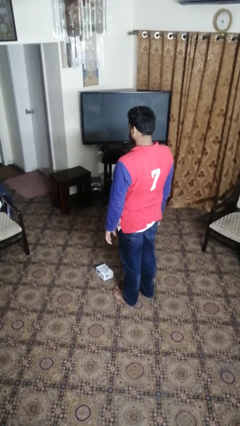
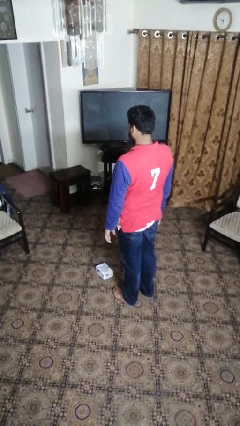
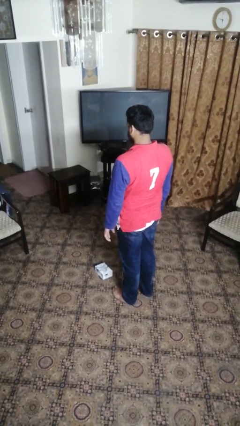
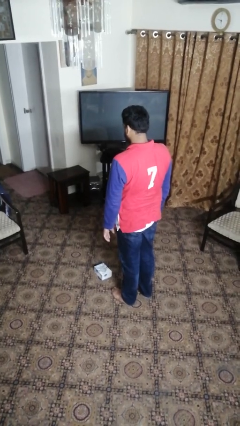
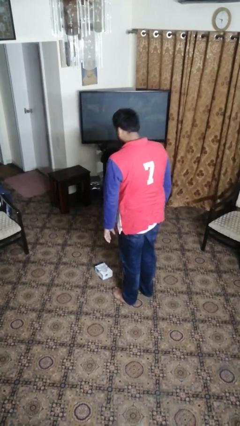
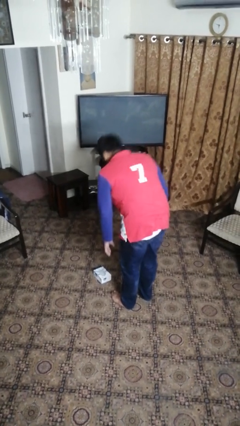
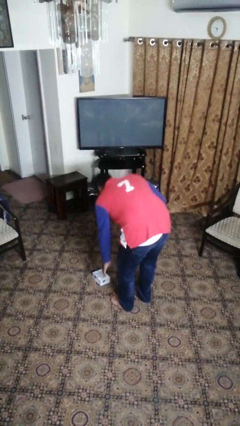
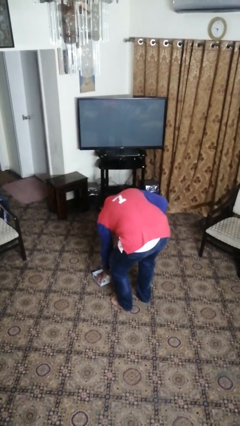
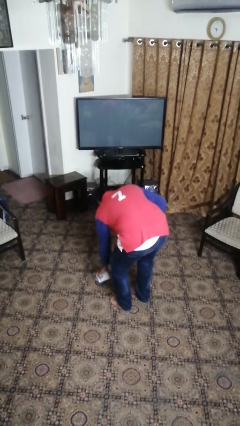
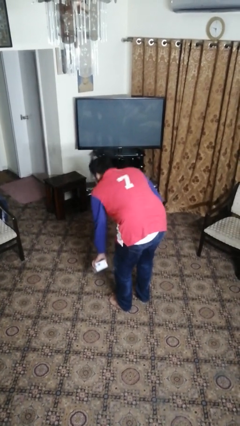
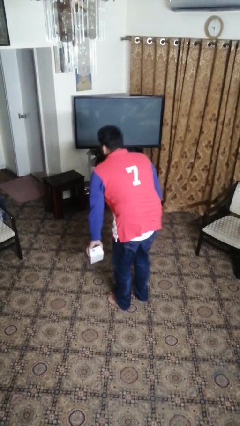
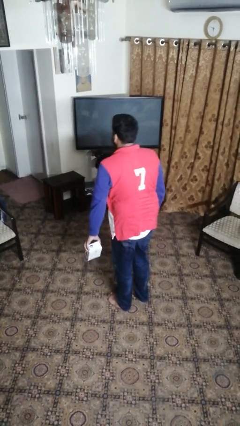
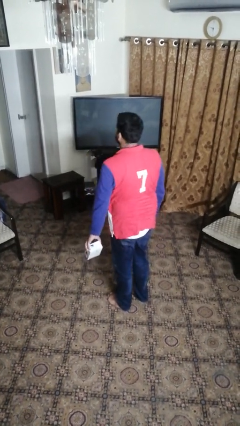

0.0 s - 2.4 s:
person picks up object from floor

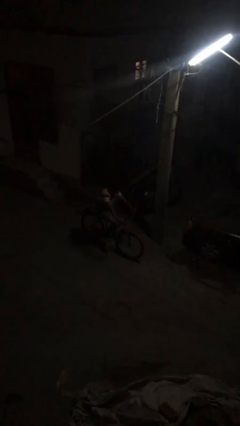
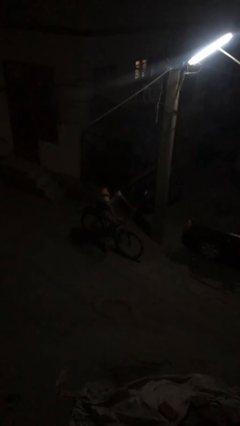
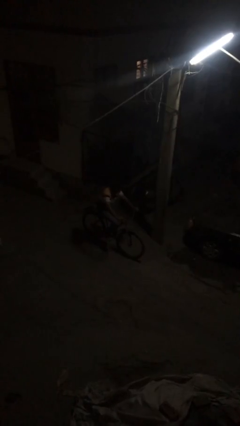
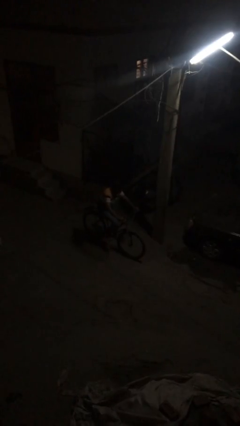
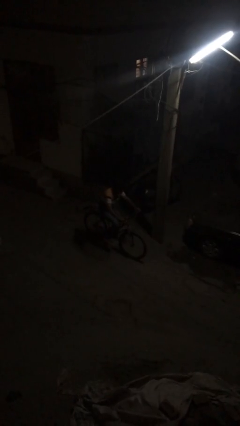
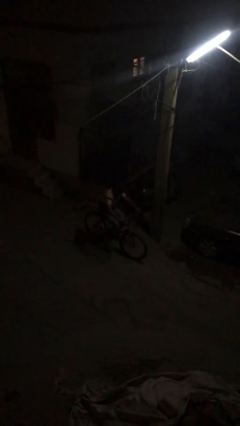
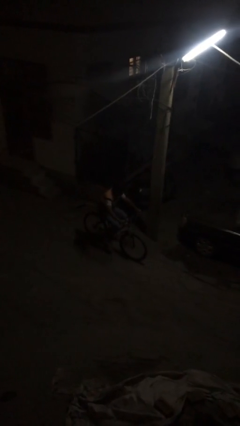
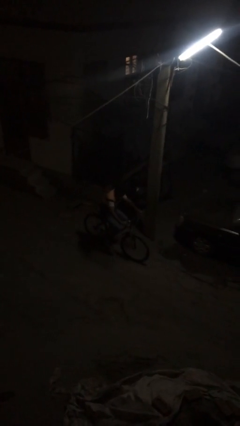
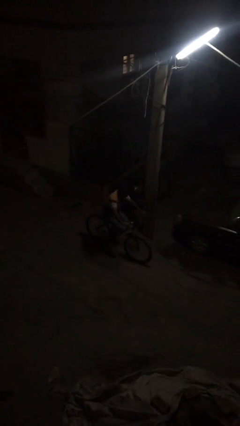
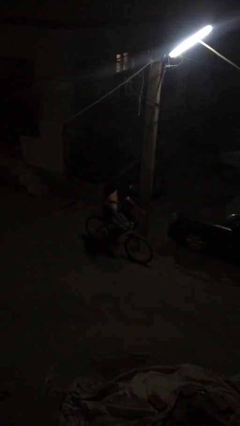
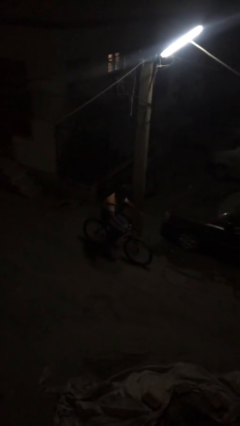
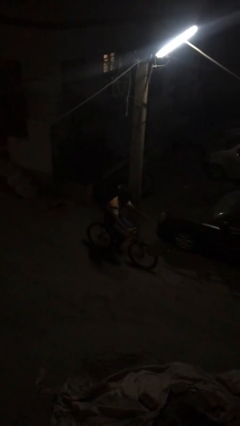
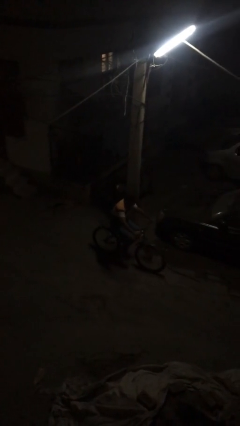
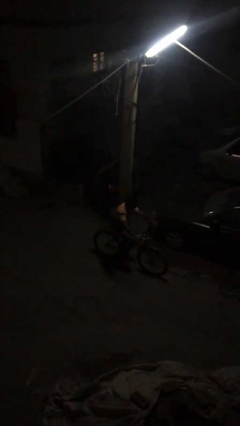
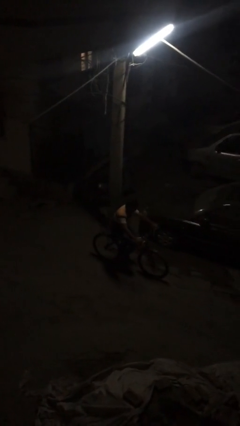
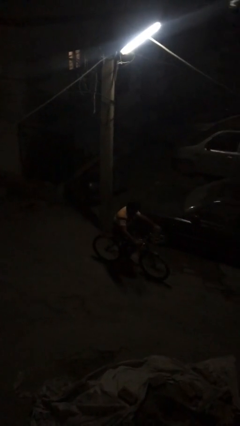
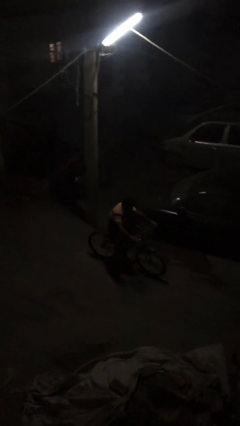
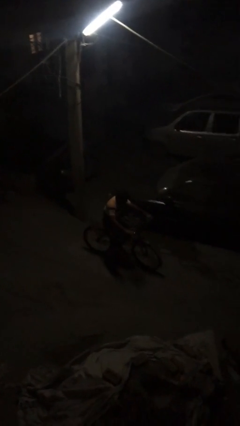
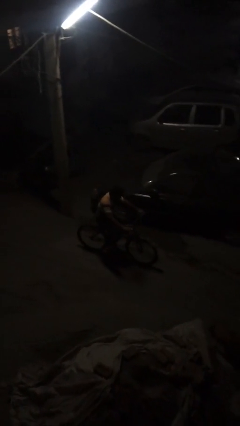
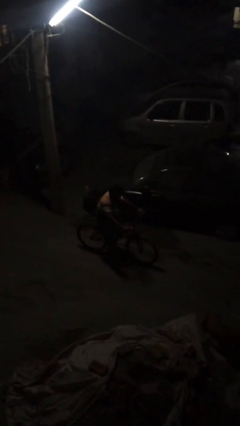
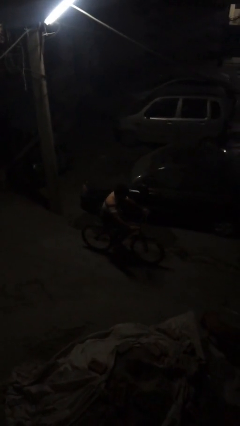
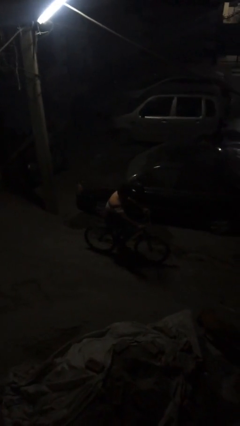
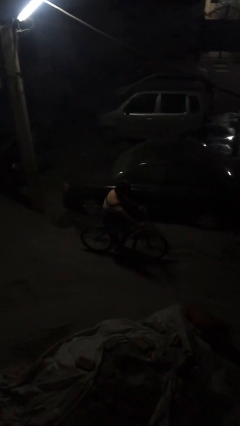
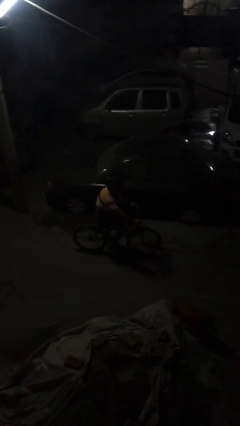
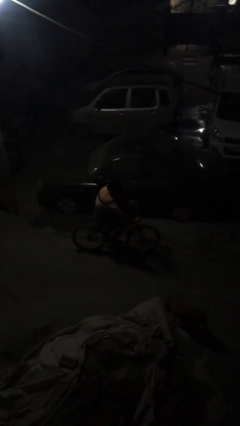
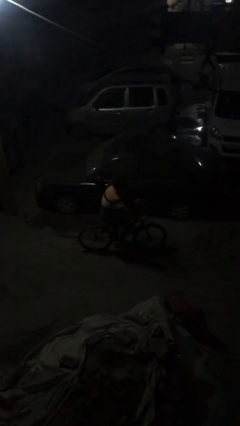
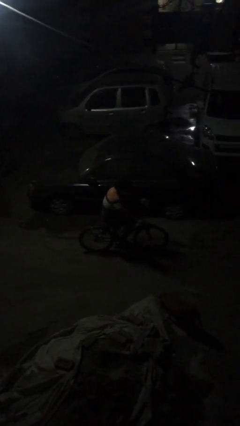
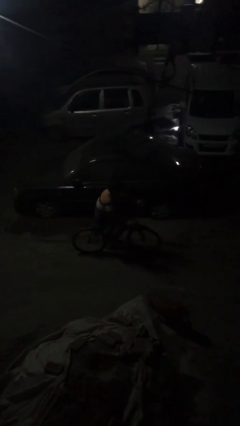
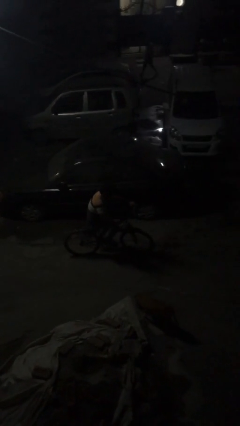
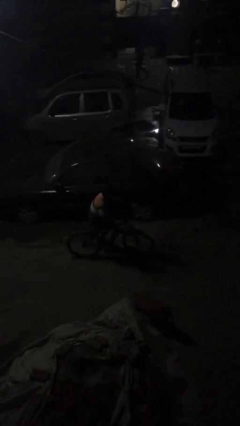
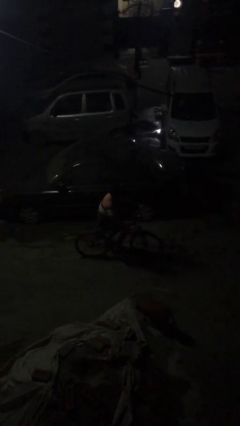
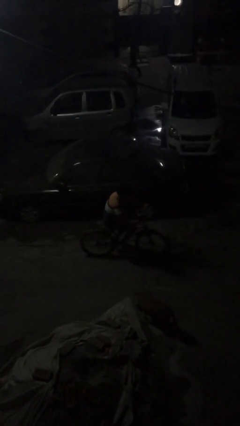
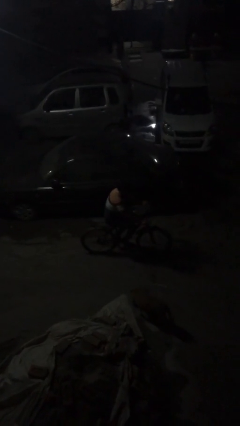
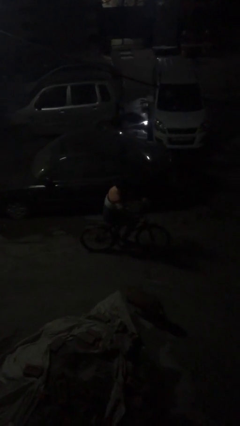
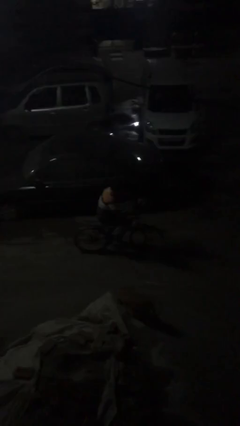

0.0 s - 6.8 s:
person rides bicycle

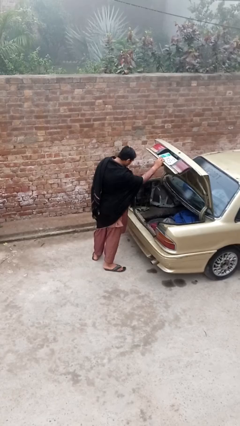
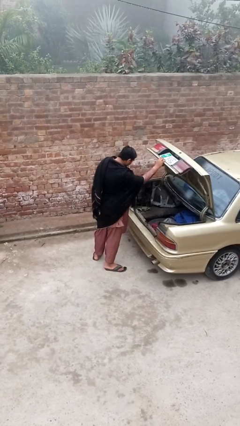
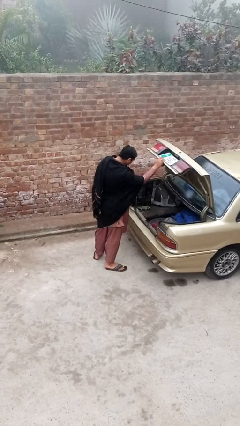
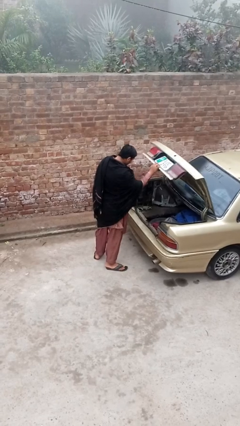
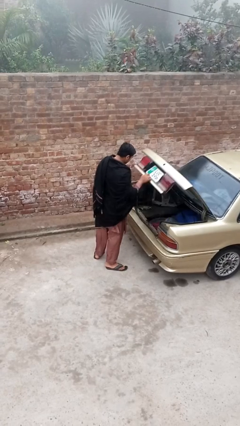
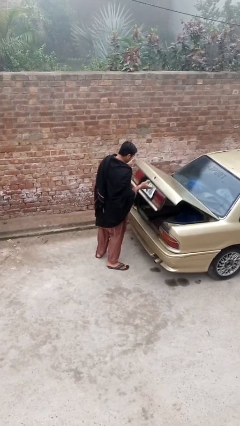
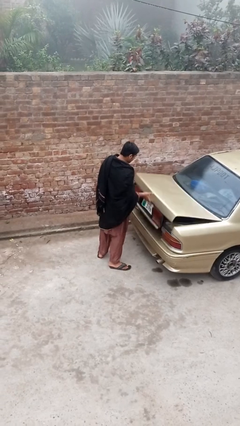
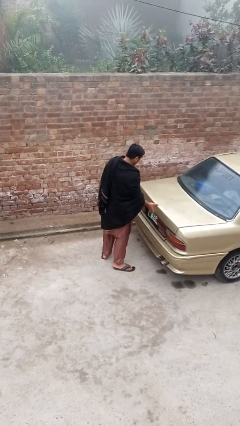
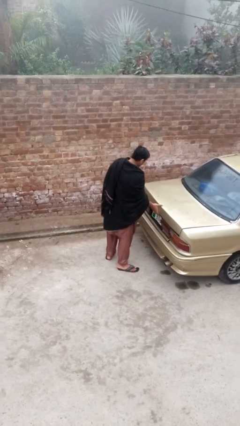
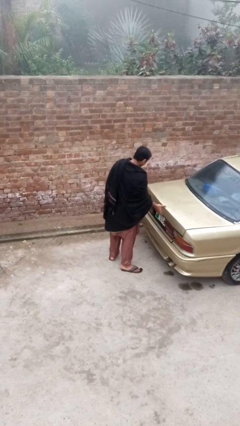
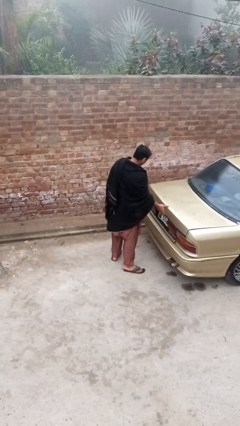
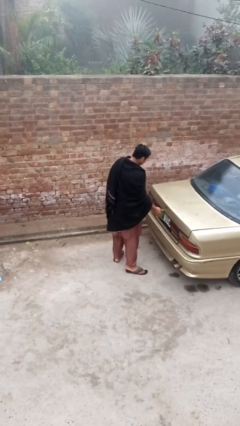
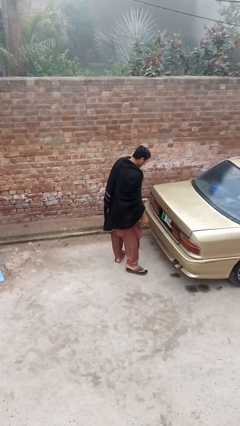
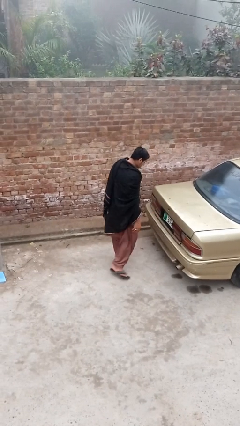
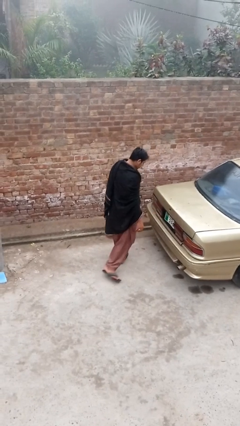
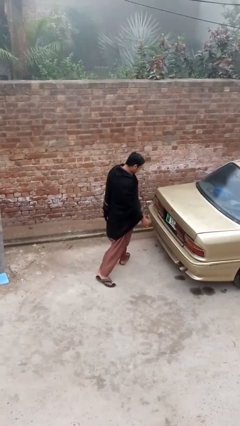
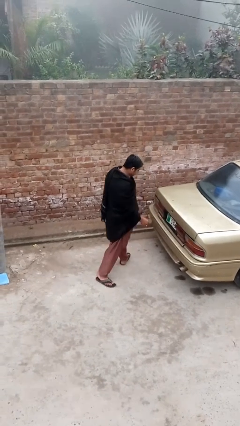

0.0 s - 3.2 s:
person closes car trunk

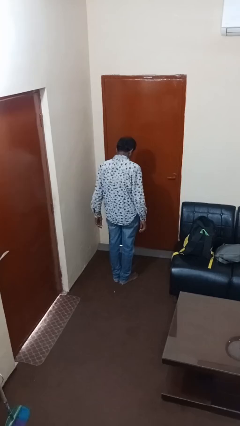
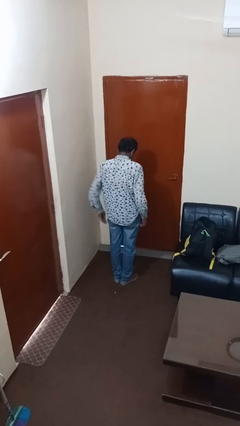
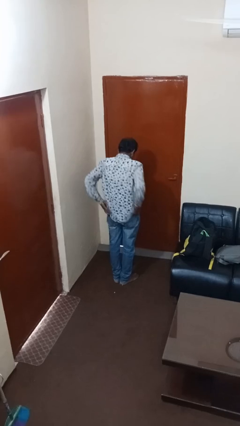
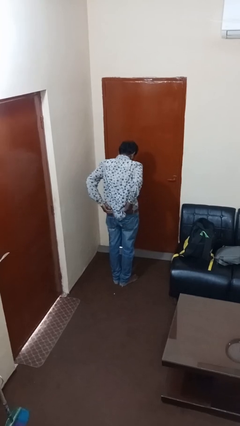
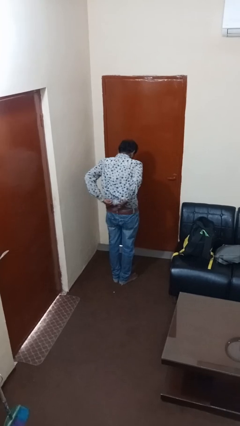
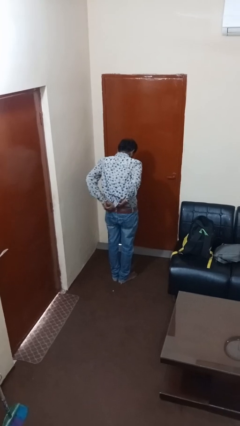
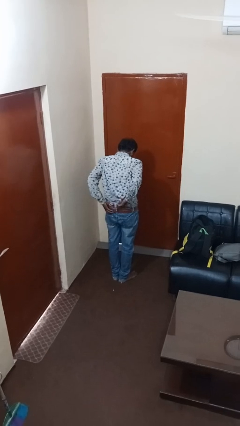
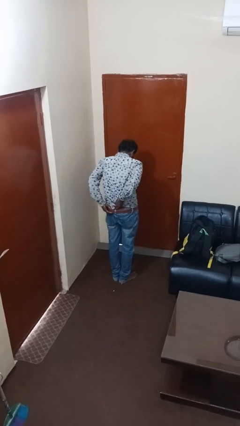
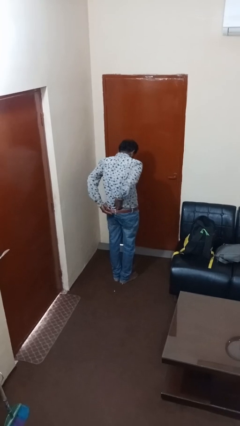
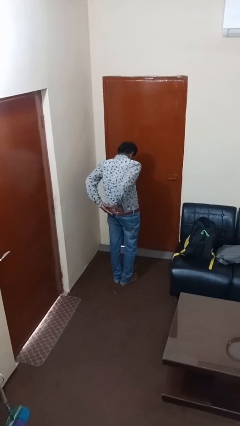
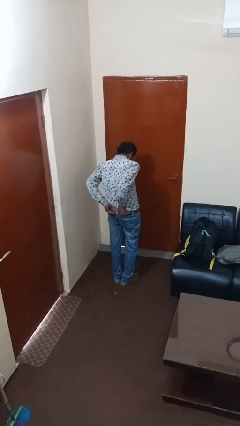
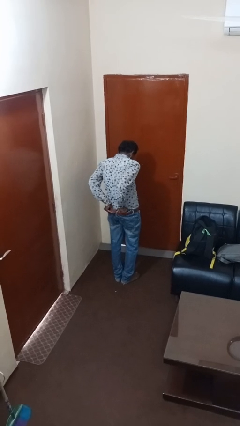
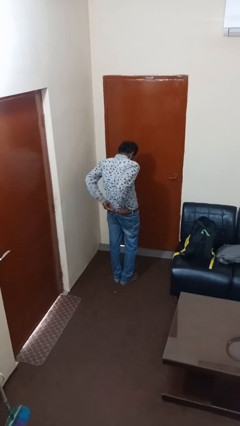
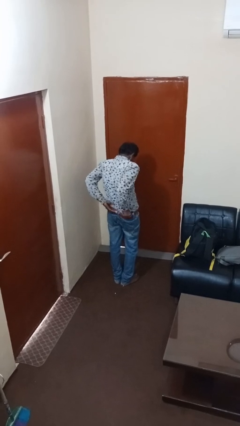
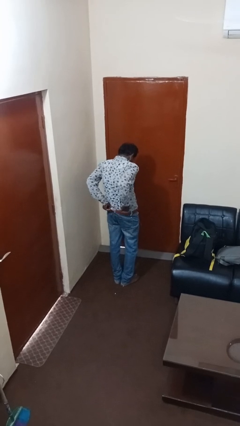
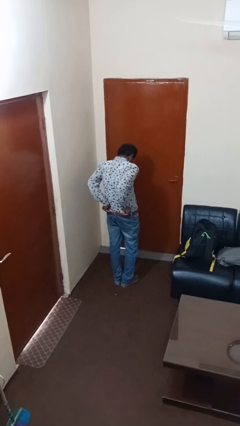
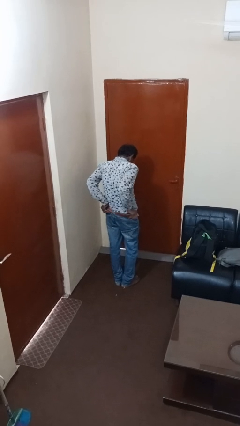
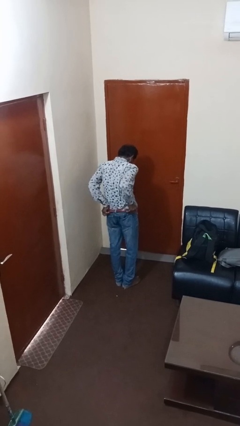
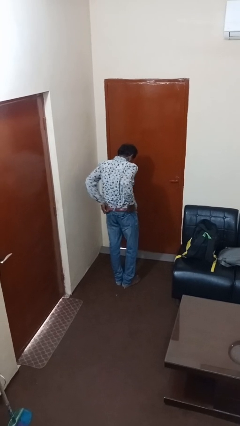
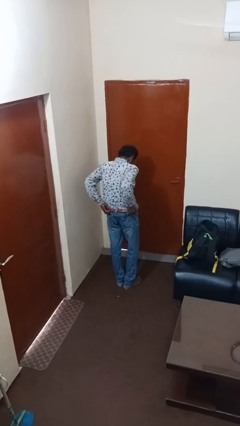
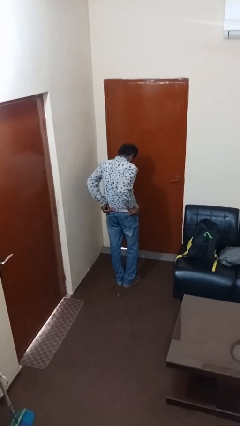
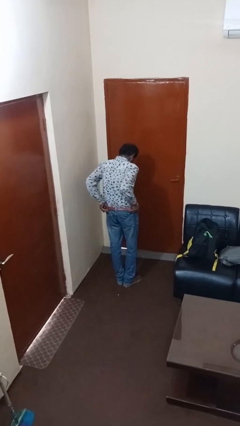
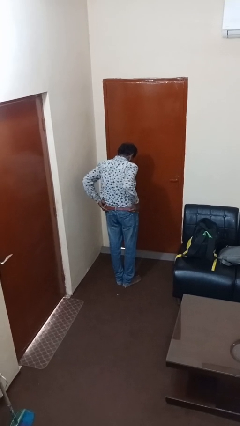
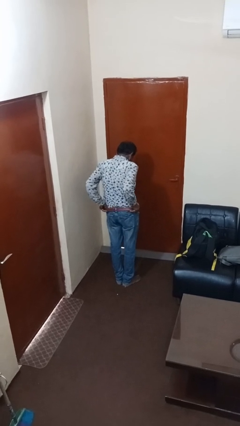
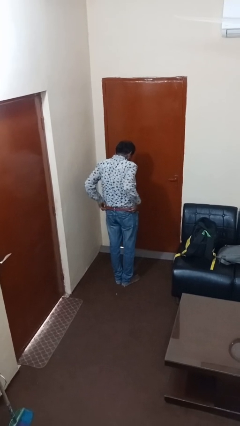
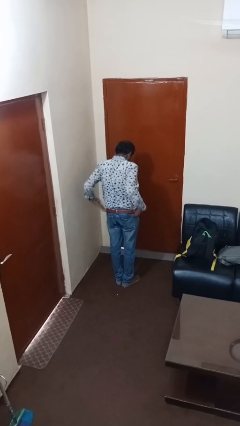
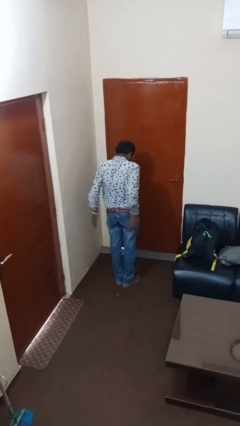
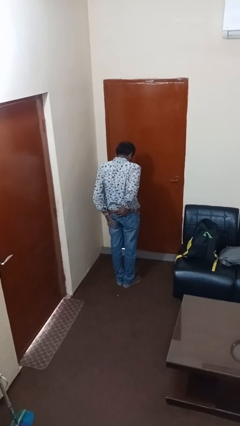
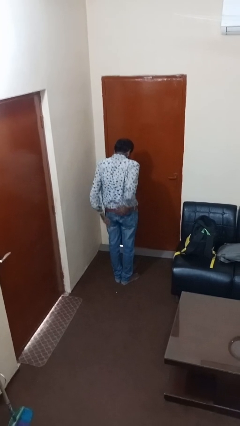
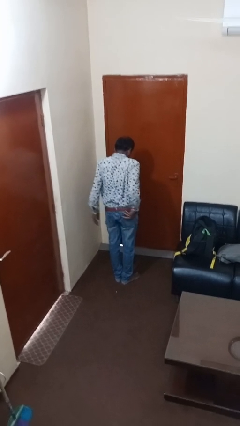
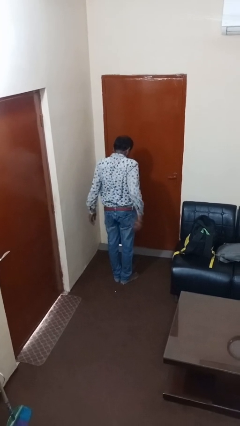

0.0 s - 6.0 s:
person tucks in shirt
